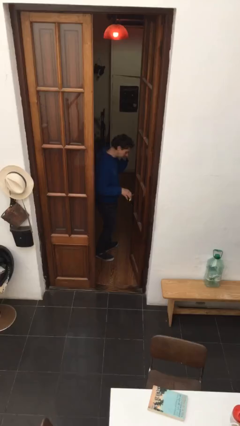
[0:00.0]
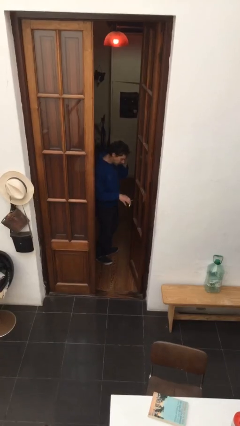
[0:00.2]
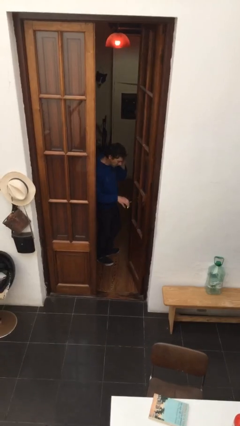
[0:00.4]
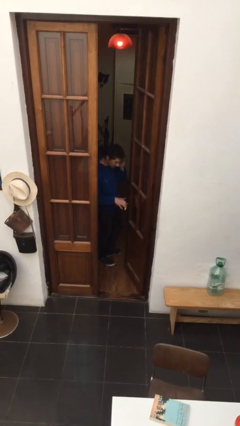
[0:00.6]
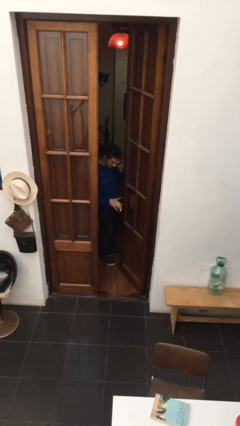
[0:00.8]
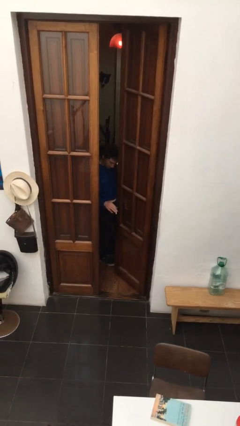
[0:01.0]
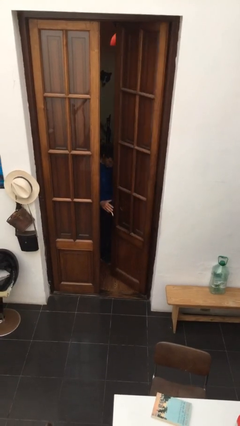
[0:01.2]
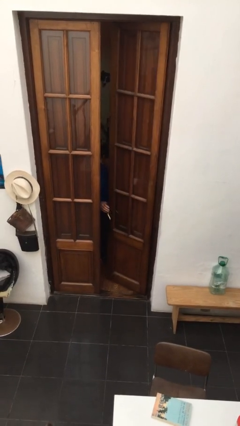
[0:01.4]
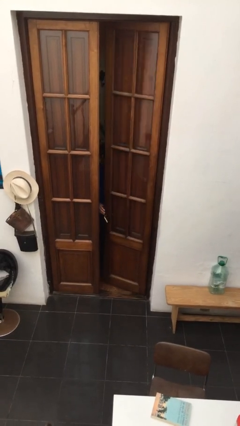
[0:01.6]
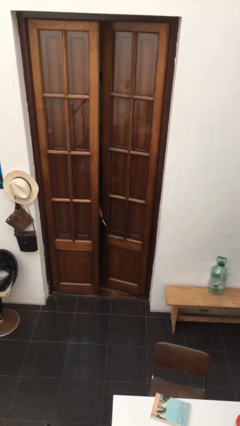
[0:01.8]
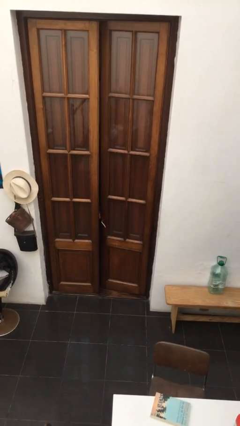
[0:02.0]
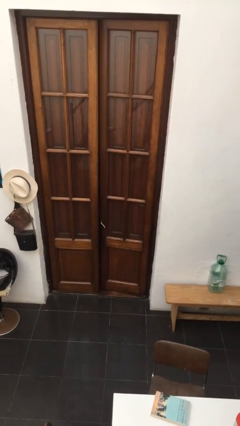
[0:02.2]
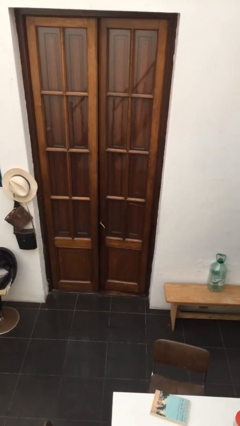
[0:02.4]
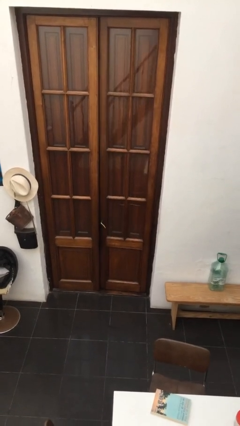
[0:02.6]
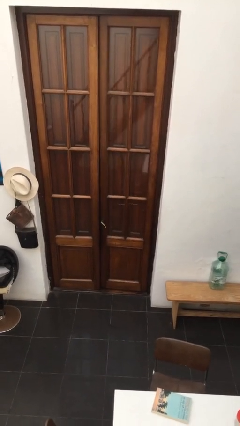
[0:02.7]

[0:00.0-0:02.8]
person closes facility door

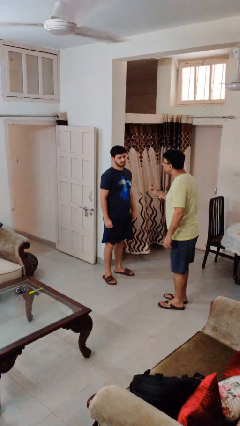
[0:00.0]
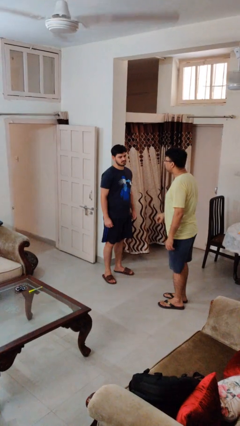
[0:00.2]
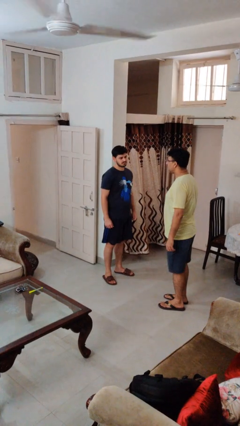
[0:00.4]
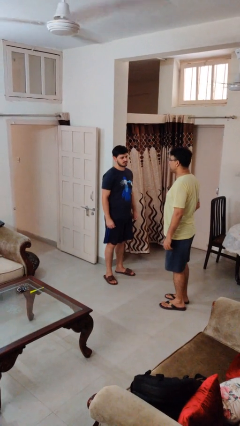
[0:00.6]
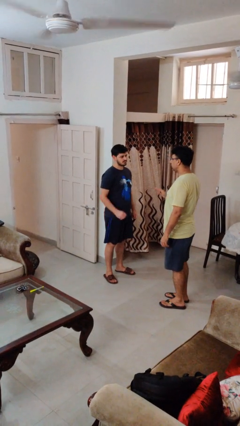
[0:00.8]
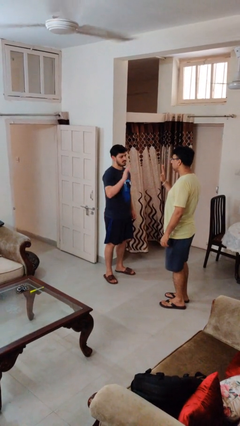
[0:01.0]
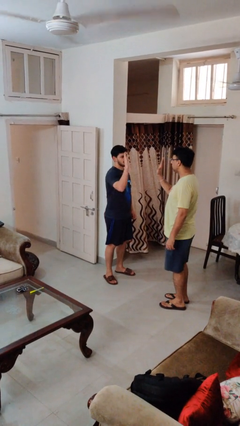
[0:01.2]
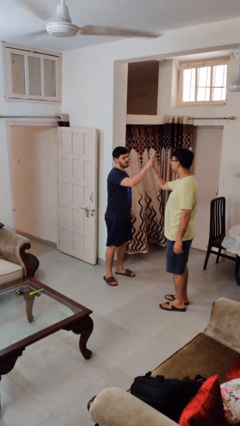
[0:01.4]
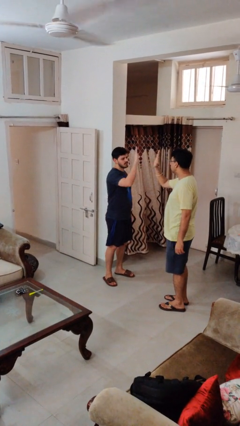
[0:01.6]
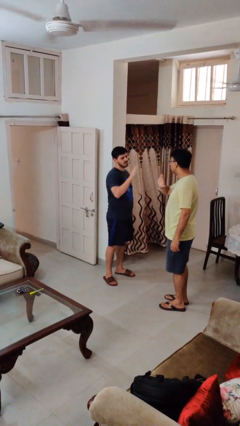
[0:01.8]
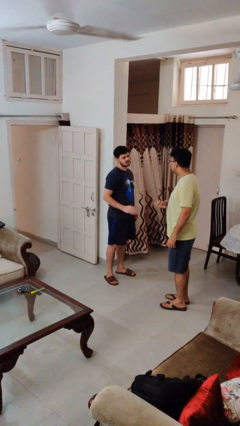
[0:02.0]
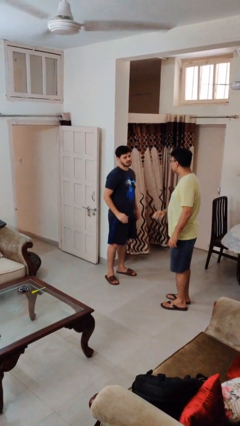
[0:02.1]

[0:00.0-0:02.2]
person highfives hand

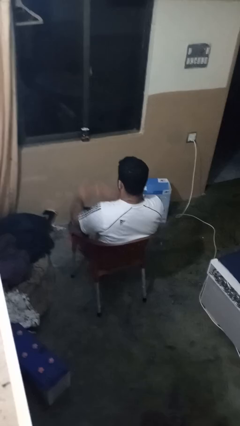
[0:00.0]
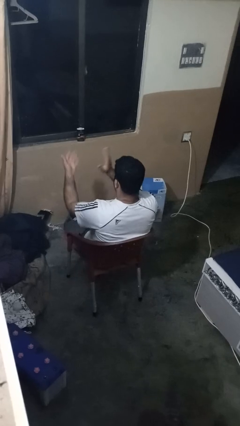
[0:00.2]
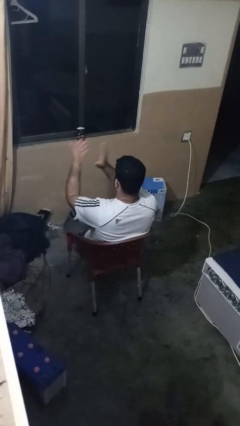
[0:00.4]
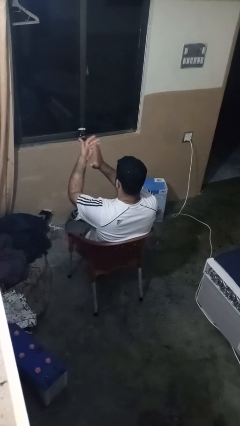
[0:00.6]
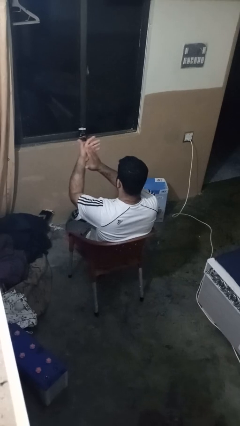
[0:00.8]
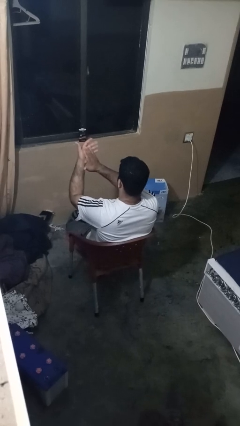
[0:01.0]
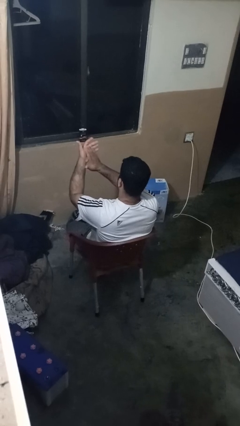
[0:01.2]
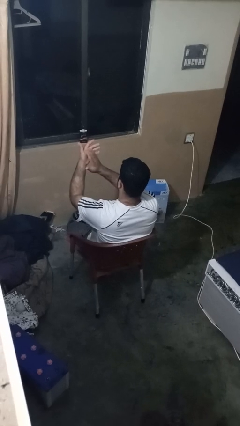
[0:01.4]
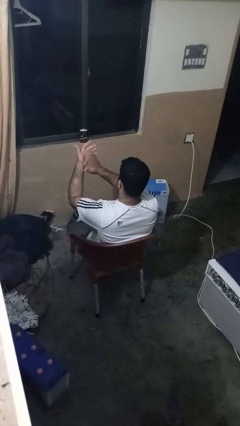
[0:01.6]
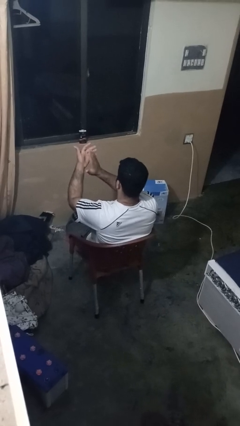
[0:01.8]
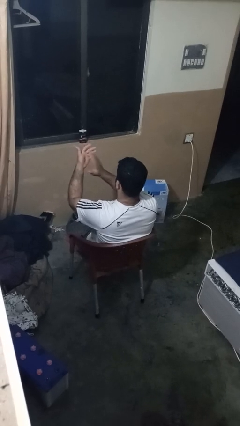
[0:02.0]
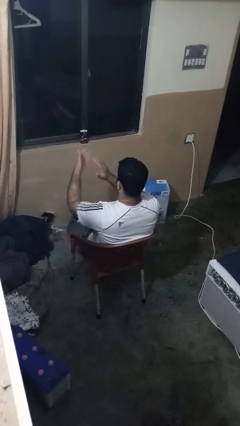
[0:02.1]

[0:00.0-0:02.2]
person slaps hands on thighs

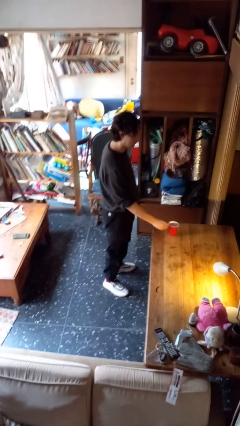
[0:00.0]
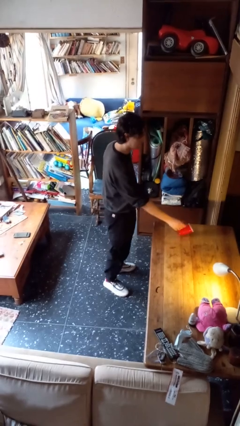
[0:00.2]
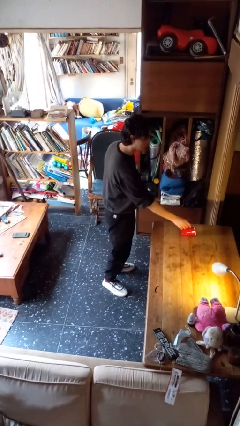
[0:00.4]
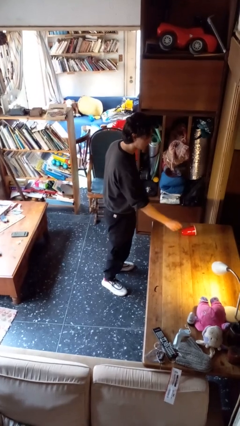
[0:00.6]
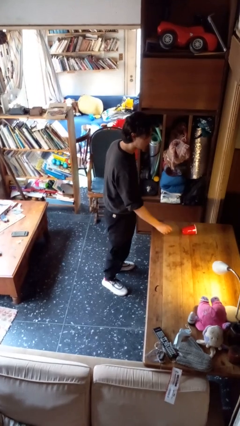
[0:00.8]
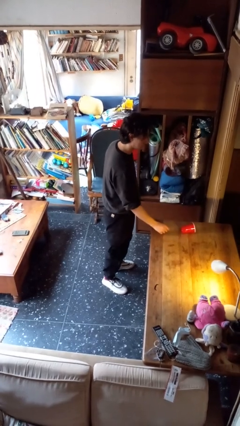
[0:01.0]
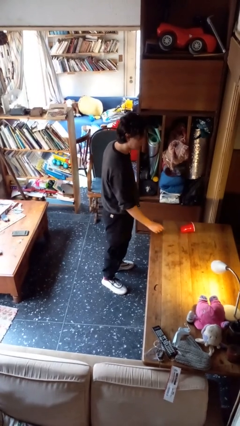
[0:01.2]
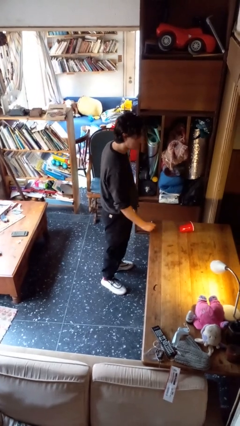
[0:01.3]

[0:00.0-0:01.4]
person knocks over glass

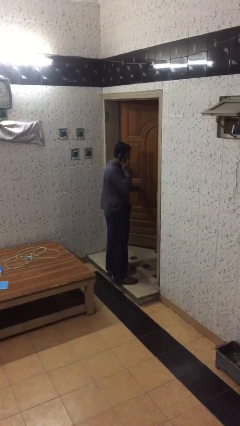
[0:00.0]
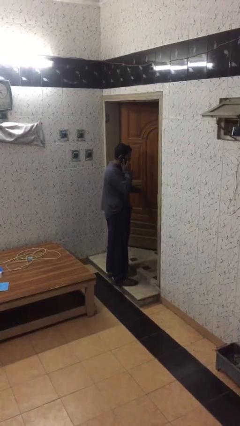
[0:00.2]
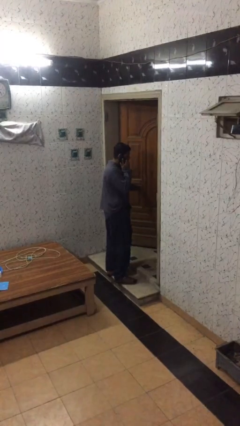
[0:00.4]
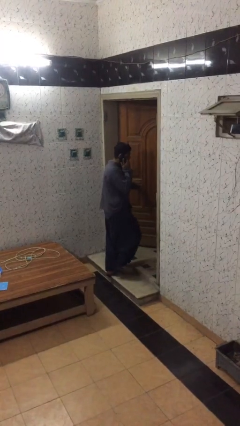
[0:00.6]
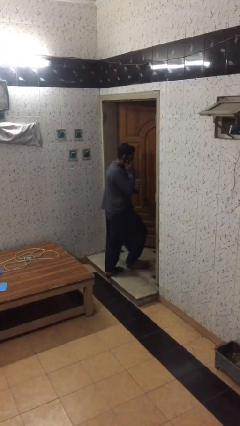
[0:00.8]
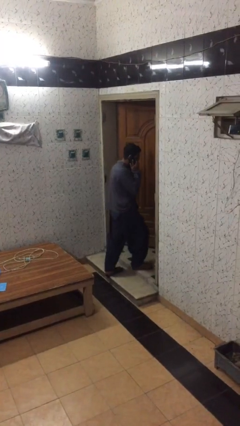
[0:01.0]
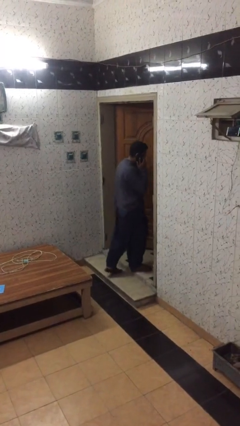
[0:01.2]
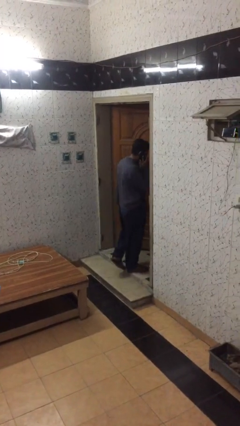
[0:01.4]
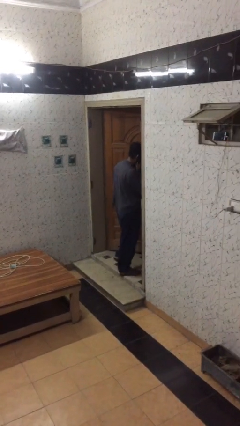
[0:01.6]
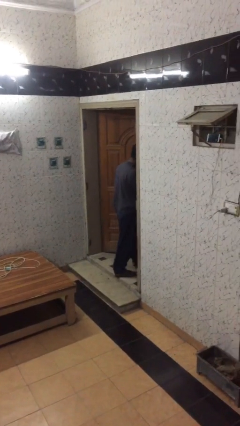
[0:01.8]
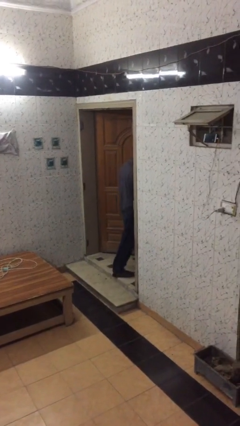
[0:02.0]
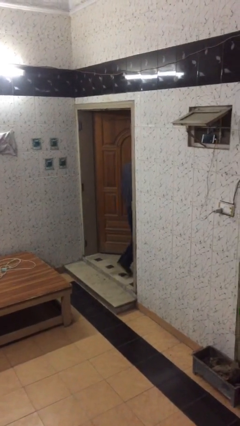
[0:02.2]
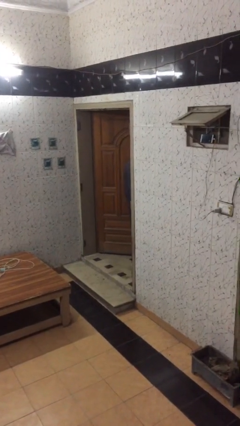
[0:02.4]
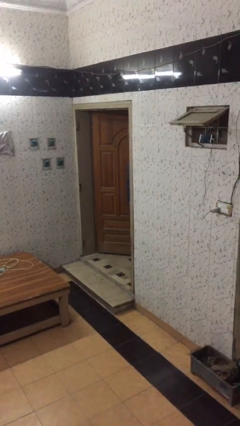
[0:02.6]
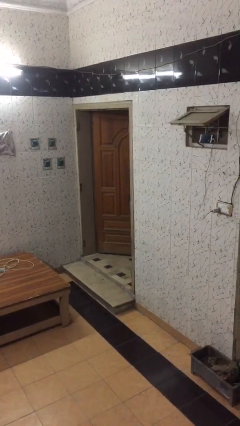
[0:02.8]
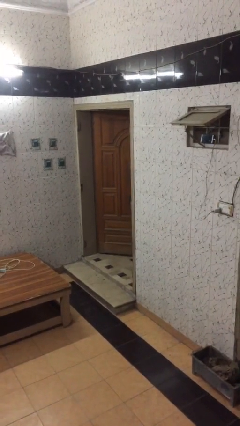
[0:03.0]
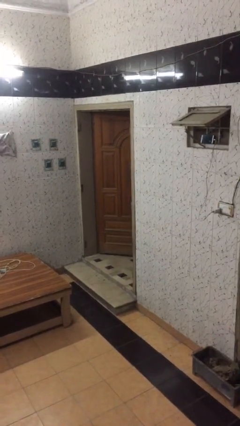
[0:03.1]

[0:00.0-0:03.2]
person exits scene through structure

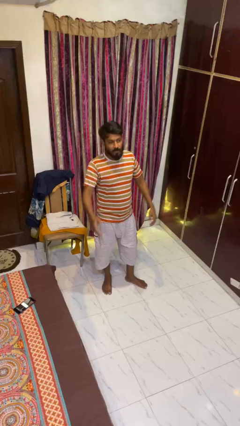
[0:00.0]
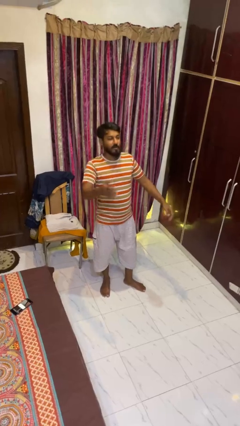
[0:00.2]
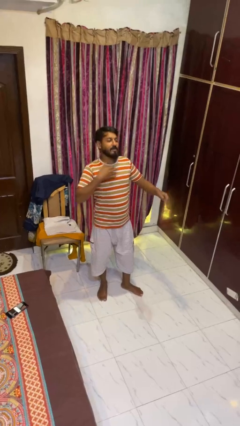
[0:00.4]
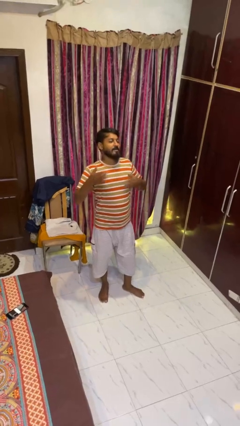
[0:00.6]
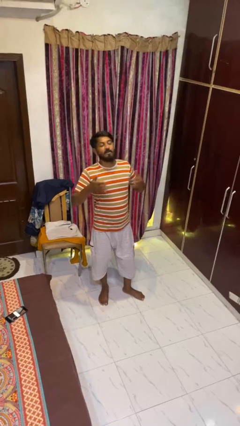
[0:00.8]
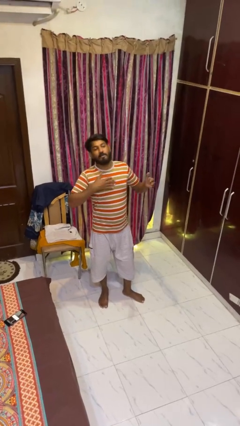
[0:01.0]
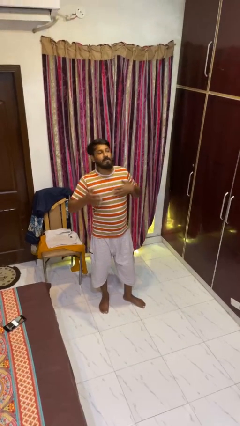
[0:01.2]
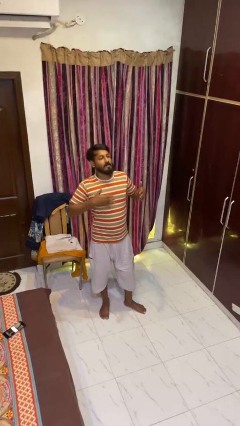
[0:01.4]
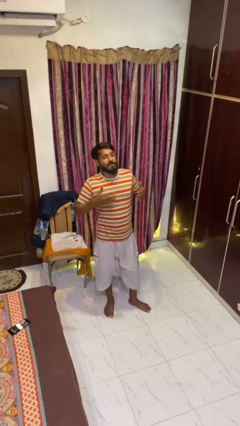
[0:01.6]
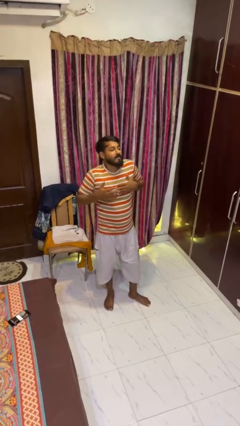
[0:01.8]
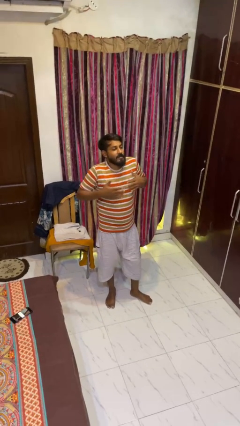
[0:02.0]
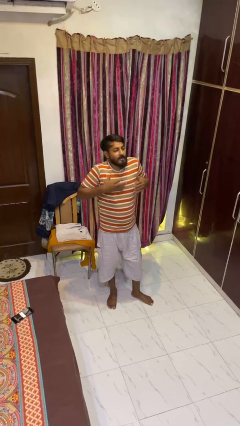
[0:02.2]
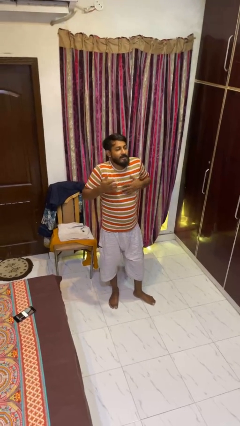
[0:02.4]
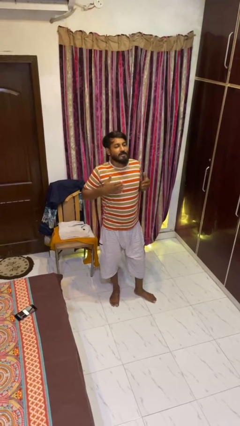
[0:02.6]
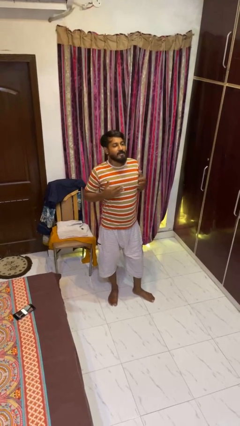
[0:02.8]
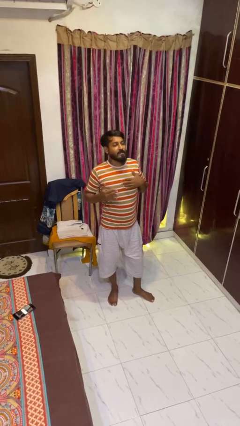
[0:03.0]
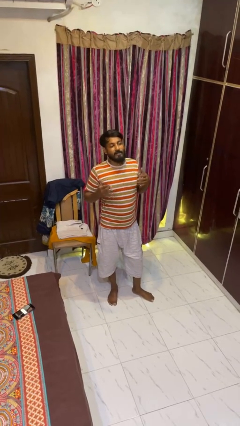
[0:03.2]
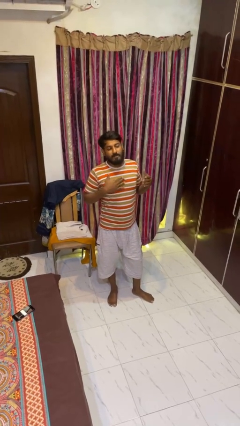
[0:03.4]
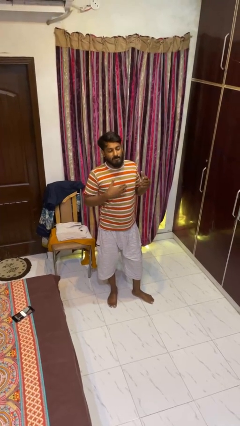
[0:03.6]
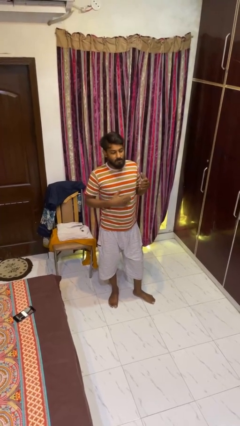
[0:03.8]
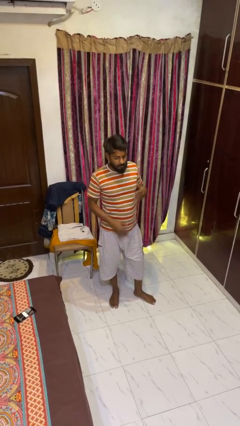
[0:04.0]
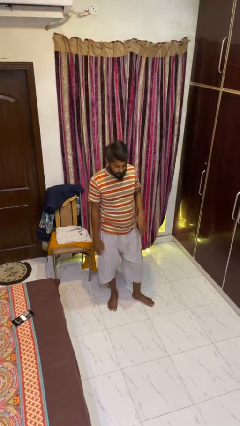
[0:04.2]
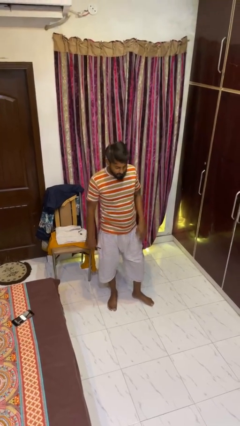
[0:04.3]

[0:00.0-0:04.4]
person drums on chest

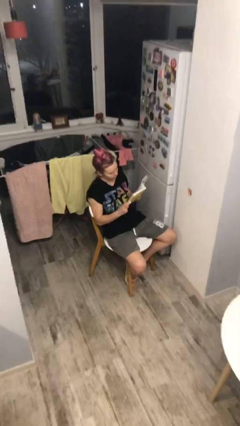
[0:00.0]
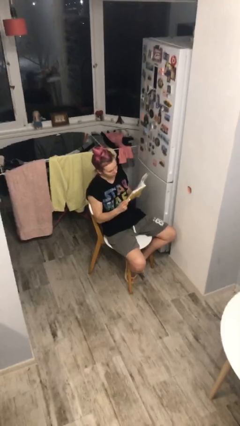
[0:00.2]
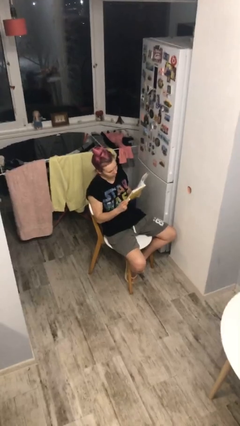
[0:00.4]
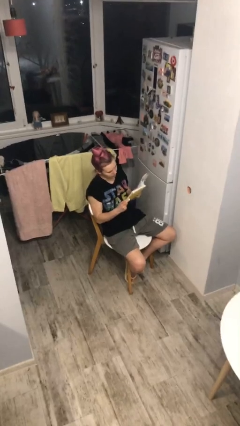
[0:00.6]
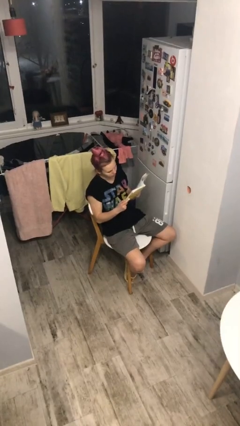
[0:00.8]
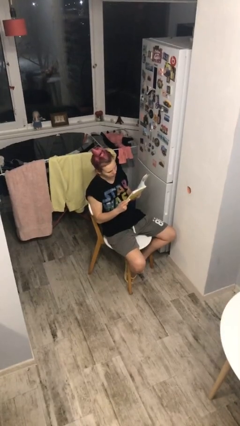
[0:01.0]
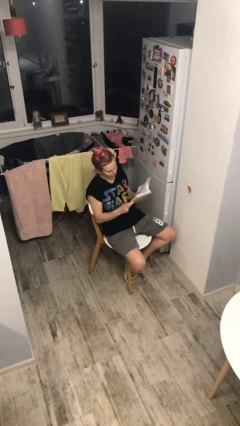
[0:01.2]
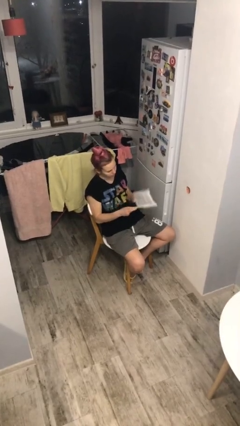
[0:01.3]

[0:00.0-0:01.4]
person reads document
